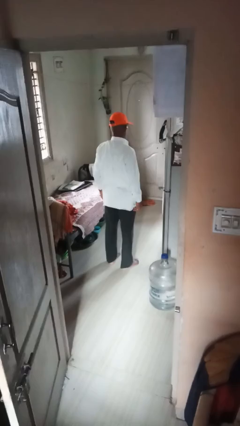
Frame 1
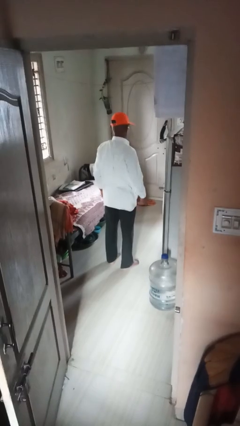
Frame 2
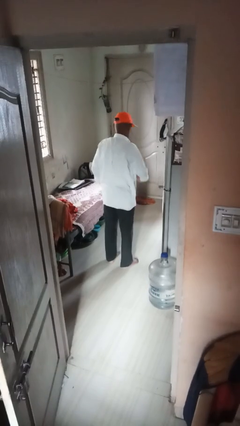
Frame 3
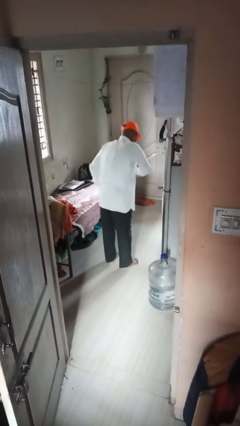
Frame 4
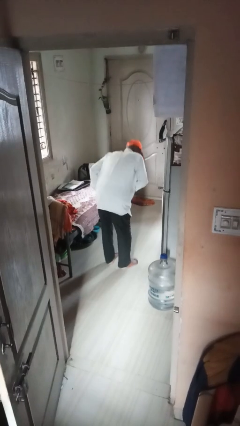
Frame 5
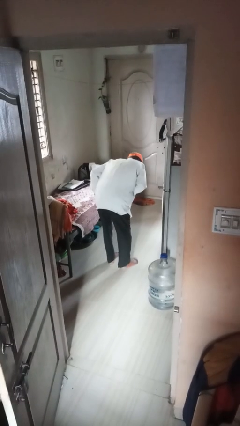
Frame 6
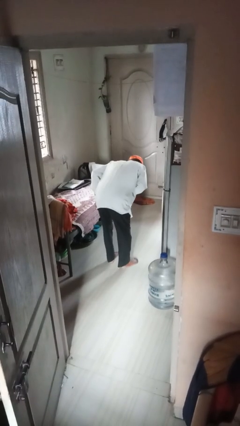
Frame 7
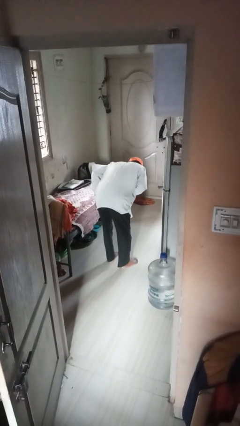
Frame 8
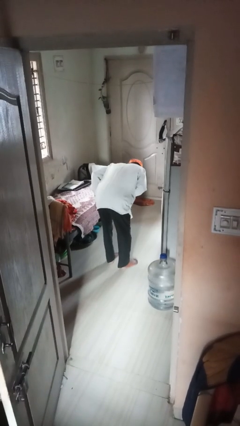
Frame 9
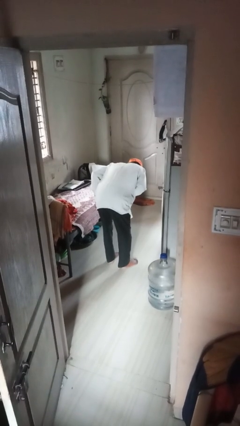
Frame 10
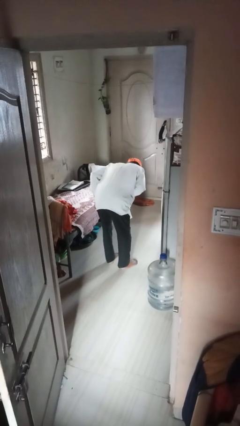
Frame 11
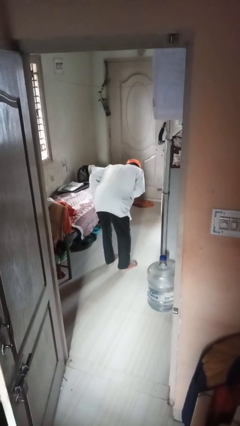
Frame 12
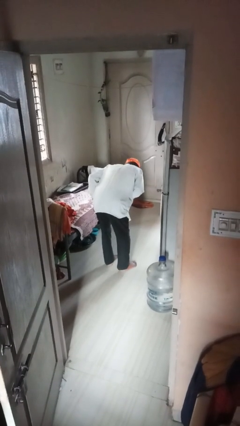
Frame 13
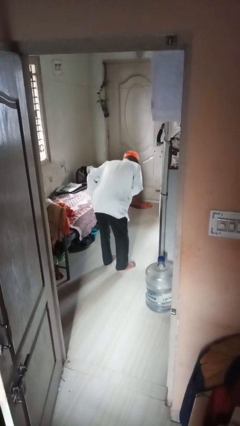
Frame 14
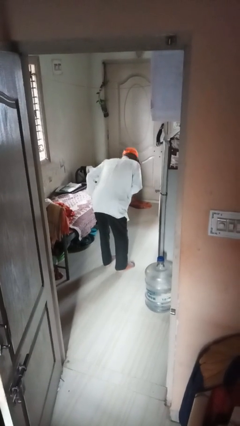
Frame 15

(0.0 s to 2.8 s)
person bows

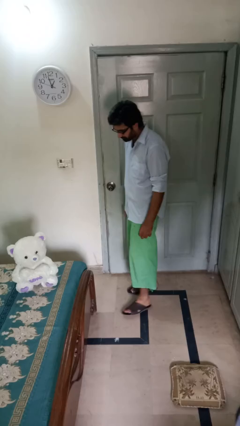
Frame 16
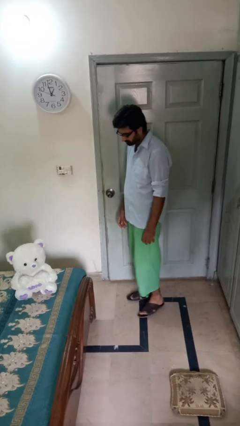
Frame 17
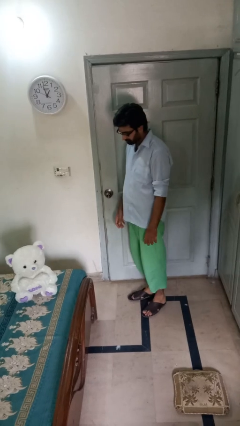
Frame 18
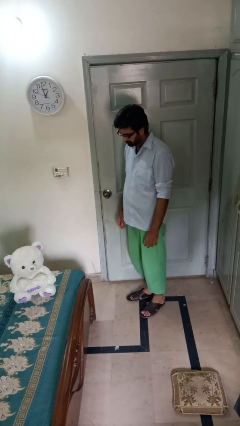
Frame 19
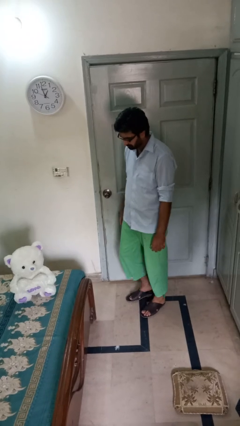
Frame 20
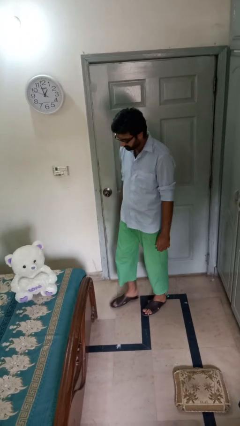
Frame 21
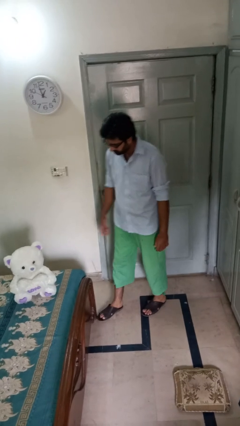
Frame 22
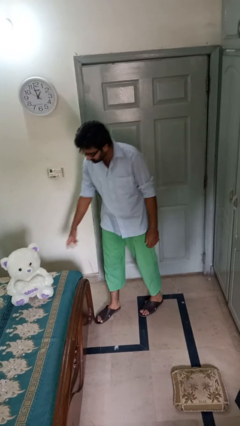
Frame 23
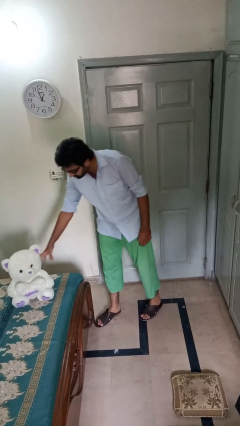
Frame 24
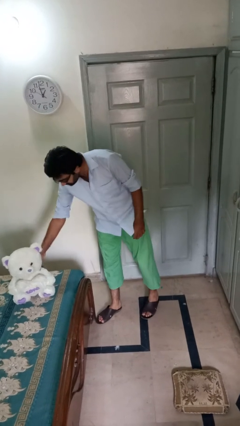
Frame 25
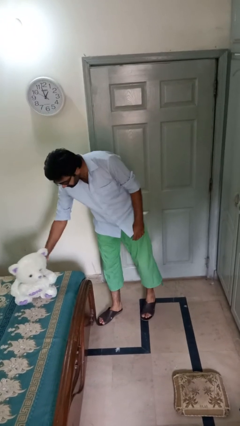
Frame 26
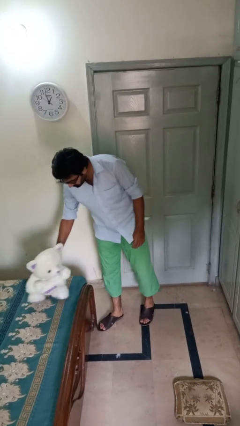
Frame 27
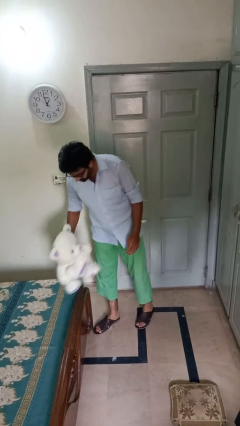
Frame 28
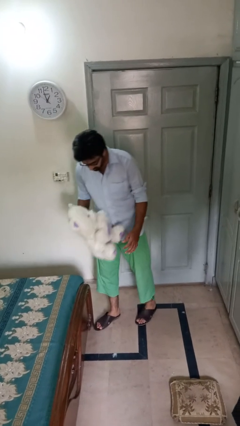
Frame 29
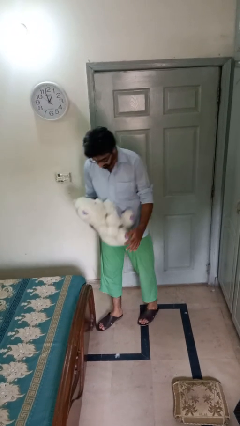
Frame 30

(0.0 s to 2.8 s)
person picks up object from bed

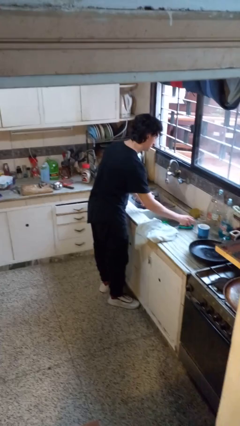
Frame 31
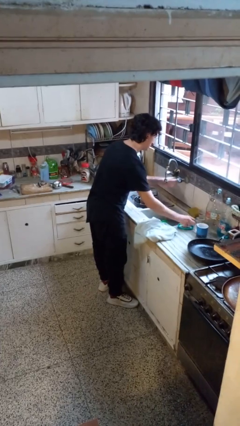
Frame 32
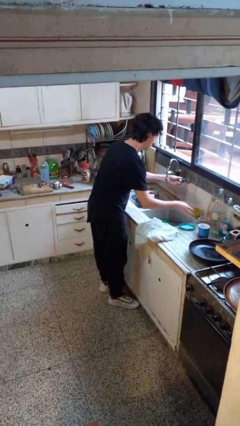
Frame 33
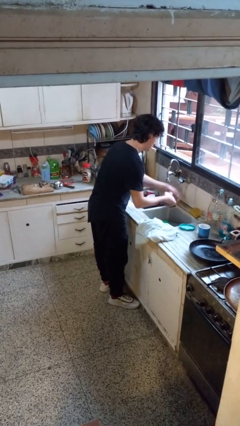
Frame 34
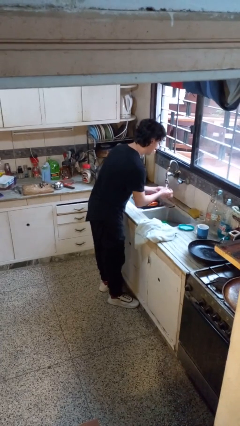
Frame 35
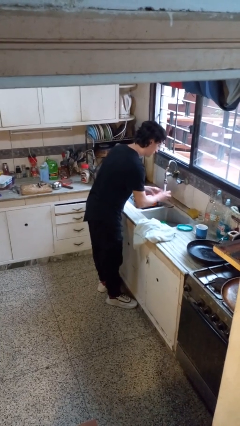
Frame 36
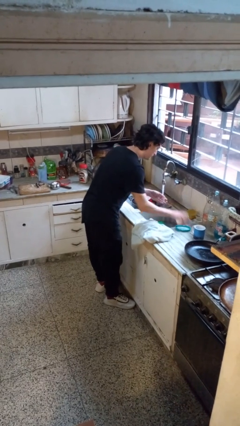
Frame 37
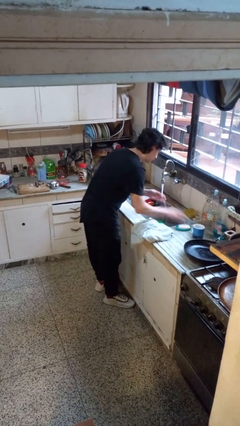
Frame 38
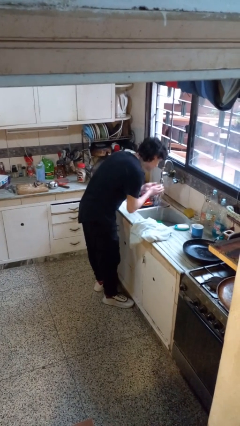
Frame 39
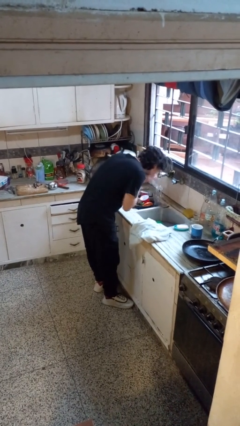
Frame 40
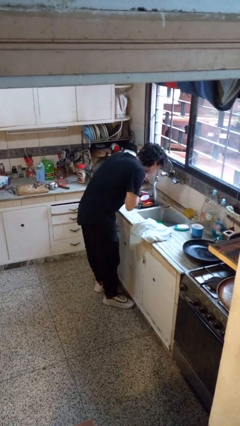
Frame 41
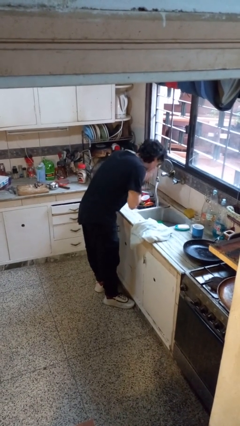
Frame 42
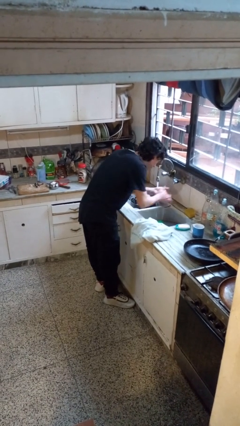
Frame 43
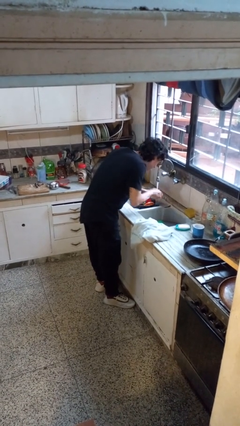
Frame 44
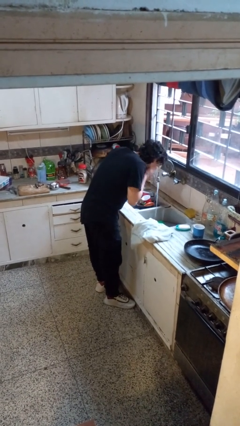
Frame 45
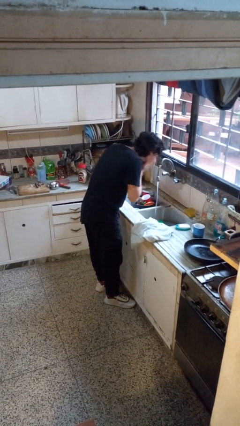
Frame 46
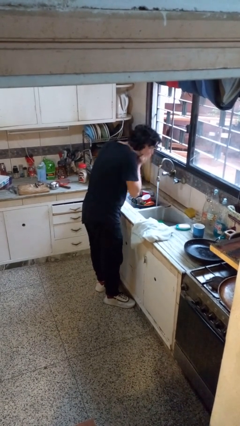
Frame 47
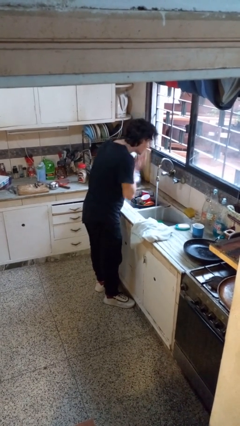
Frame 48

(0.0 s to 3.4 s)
person washes face

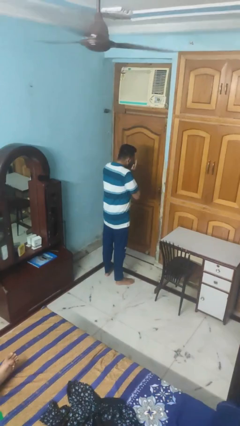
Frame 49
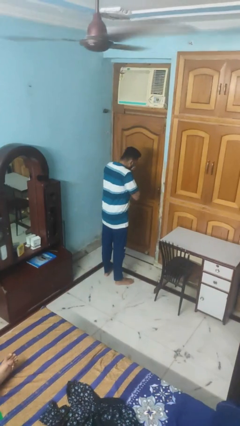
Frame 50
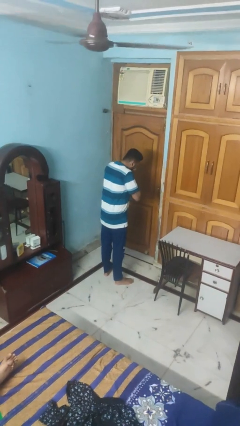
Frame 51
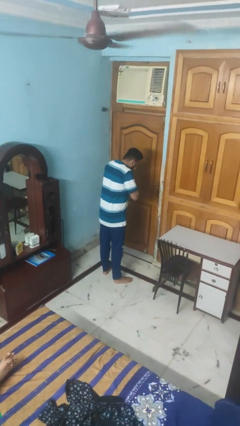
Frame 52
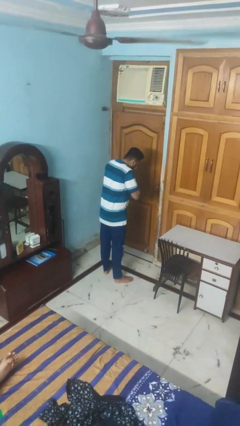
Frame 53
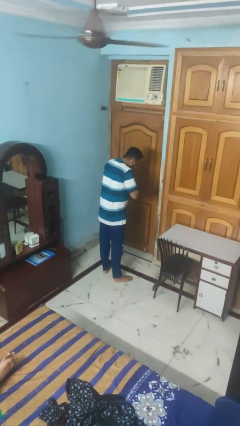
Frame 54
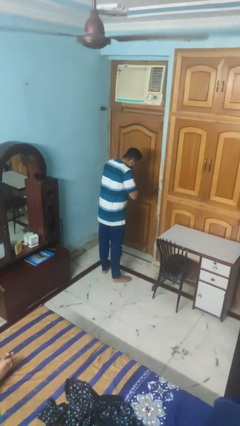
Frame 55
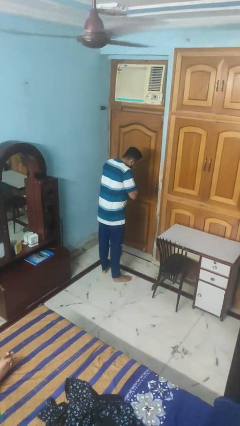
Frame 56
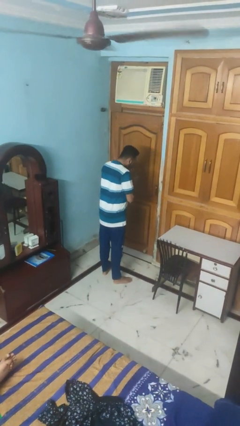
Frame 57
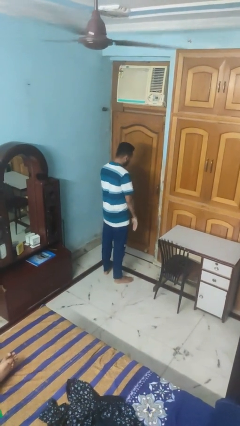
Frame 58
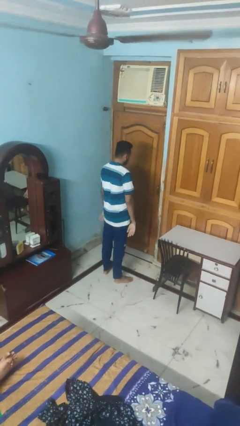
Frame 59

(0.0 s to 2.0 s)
person sneezes into hand

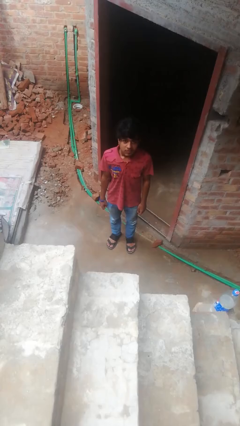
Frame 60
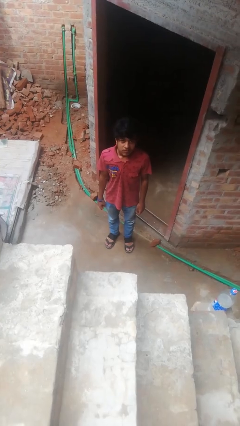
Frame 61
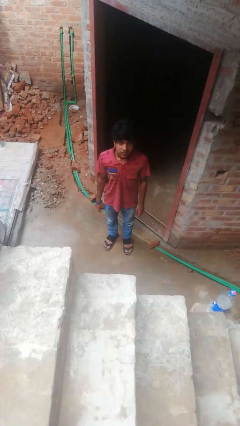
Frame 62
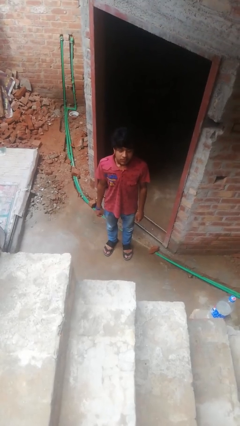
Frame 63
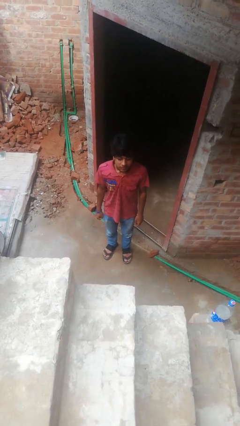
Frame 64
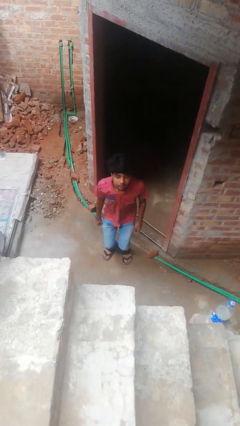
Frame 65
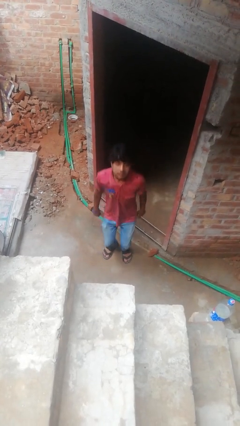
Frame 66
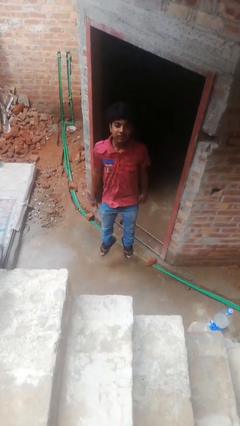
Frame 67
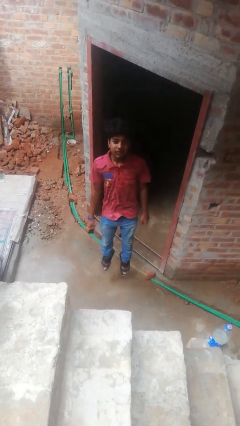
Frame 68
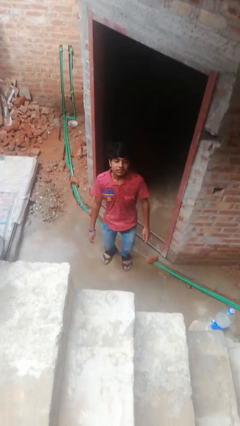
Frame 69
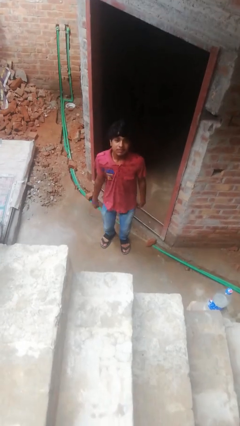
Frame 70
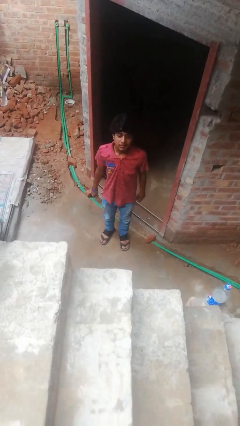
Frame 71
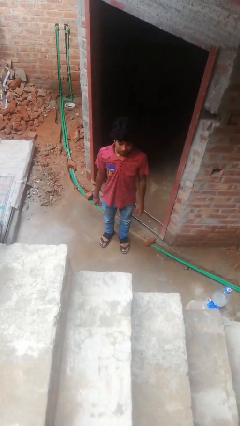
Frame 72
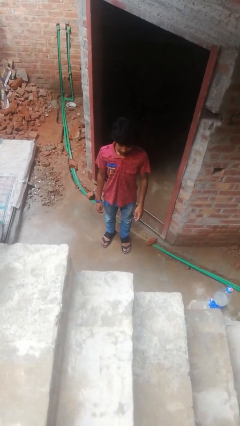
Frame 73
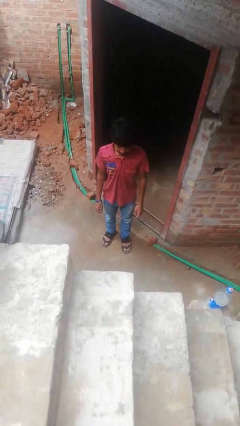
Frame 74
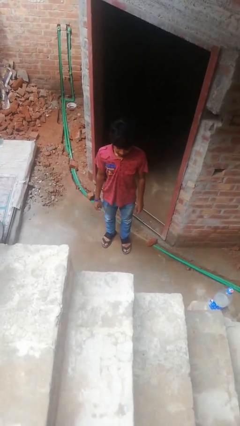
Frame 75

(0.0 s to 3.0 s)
person jumps

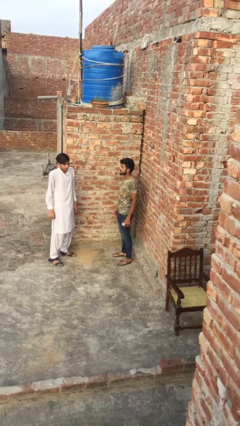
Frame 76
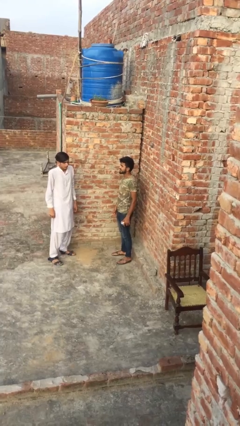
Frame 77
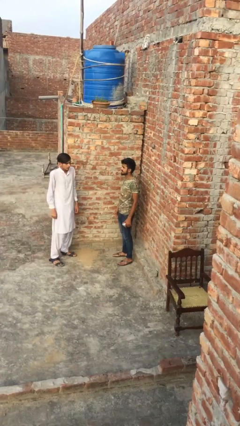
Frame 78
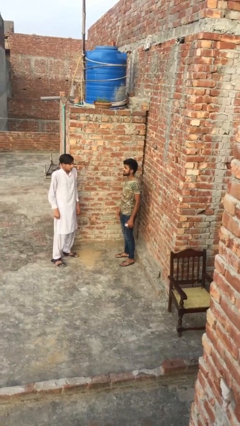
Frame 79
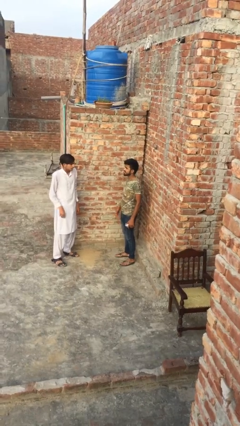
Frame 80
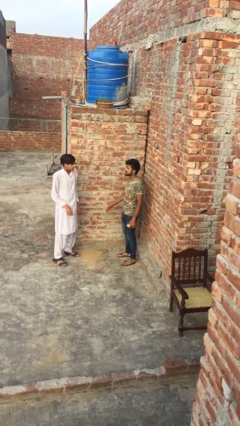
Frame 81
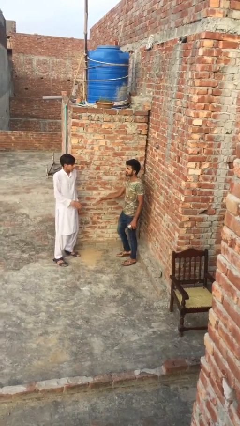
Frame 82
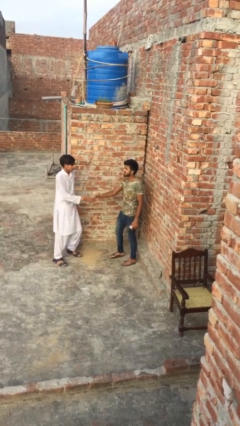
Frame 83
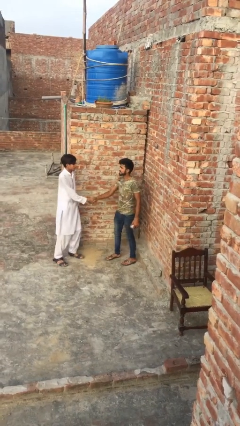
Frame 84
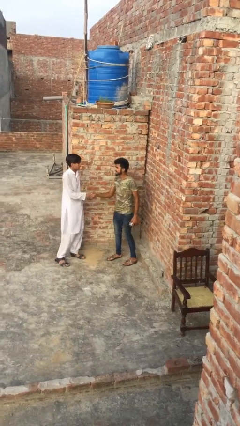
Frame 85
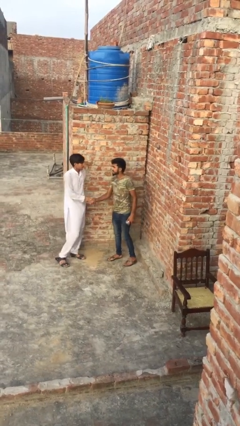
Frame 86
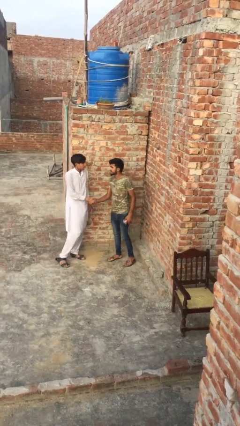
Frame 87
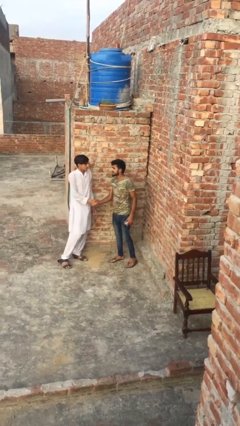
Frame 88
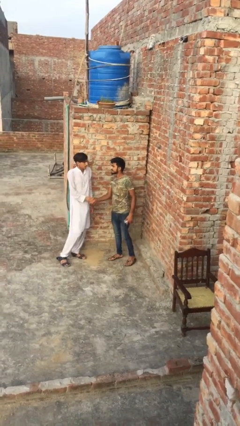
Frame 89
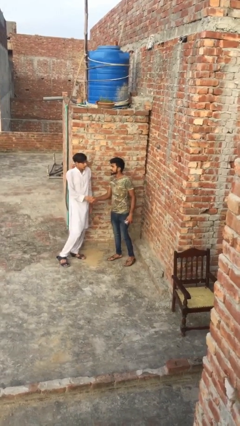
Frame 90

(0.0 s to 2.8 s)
person shakes hand

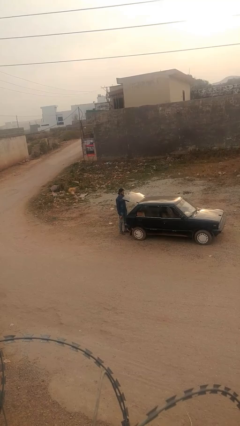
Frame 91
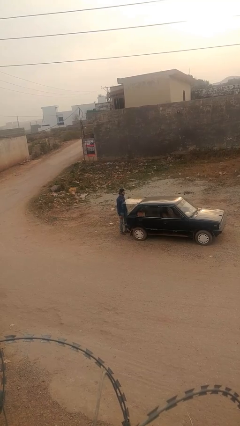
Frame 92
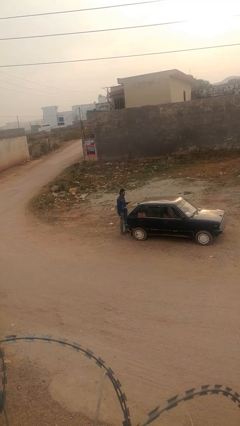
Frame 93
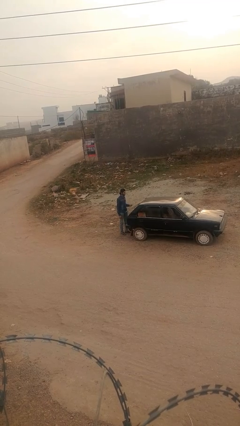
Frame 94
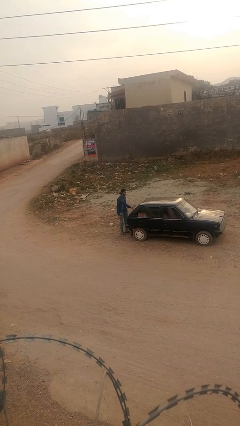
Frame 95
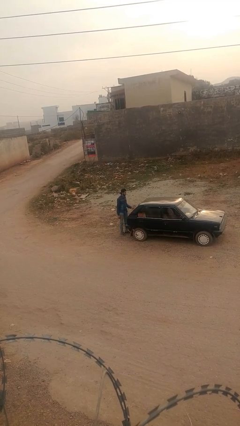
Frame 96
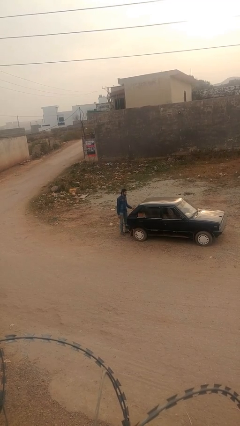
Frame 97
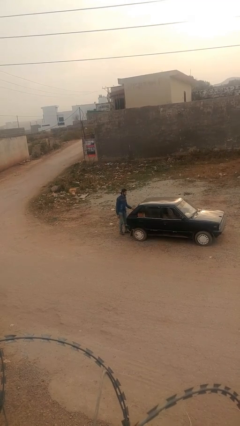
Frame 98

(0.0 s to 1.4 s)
person closes car trunk
